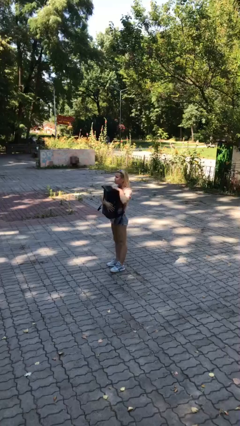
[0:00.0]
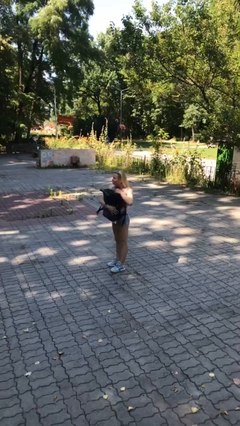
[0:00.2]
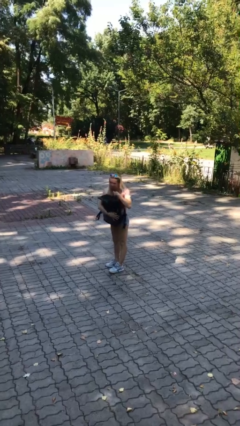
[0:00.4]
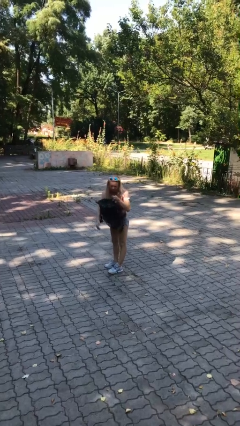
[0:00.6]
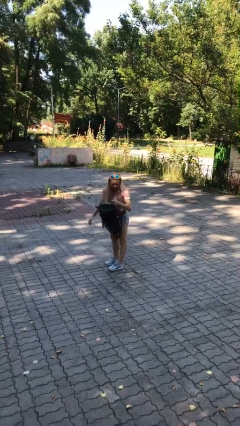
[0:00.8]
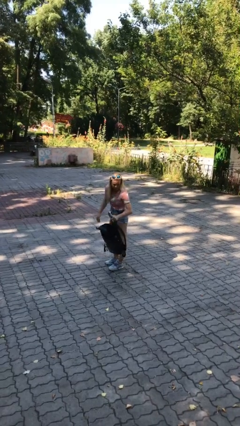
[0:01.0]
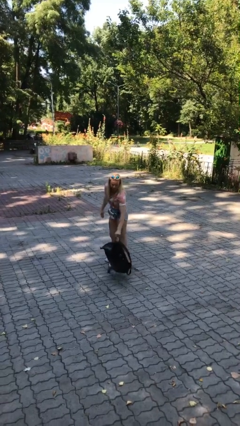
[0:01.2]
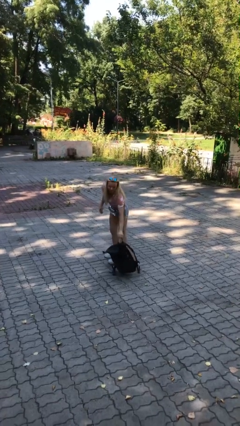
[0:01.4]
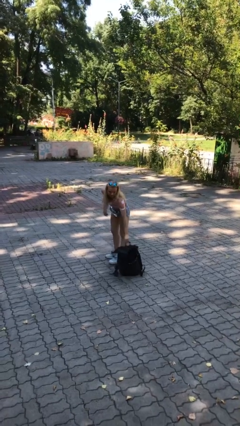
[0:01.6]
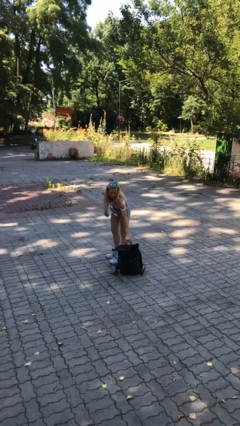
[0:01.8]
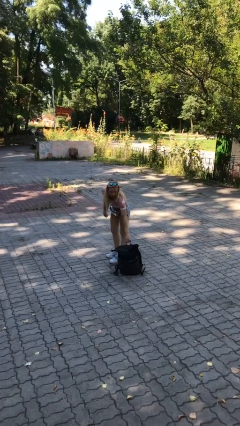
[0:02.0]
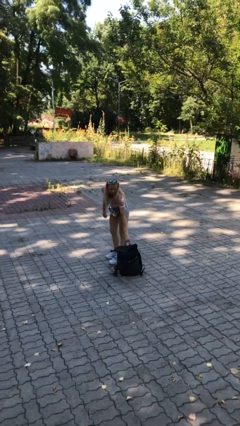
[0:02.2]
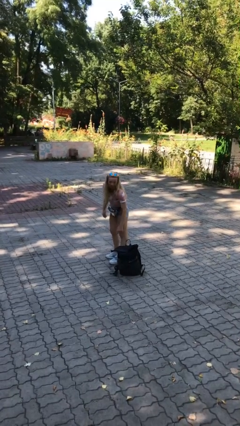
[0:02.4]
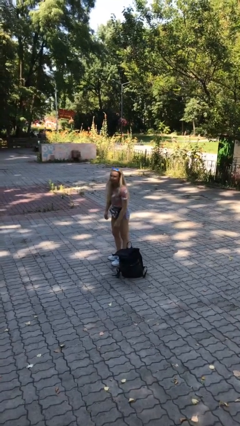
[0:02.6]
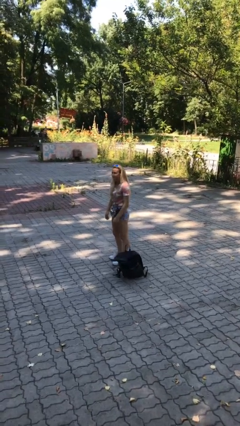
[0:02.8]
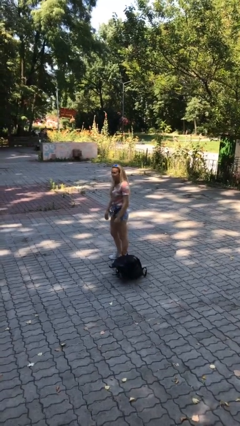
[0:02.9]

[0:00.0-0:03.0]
person puts down object on floor

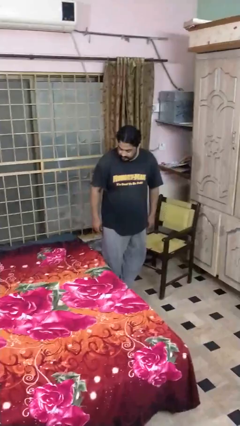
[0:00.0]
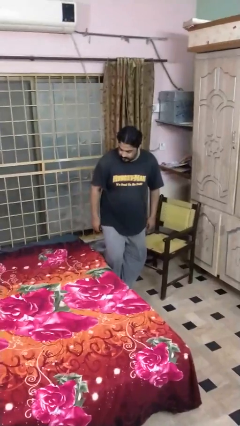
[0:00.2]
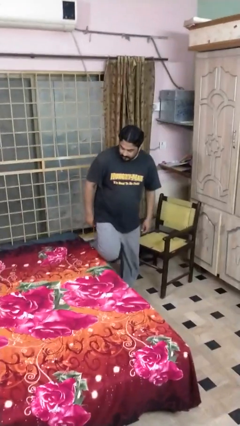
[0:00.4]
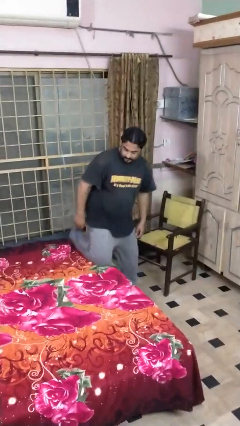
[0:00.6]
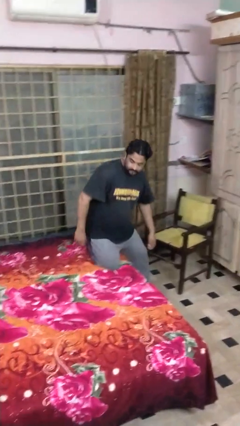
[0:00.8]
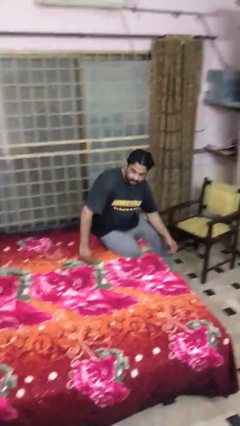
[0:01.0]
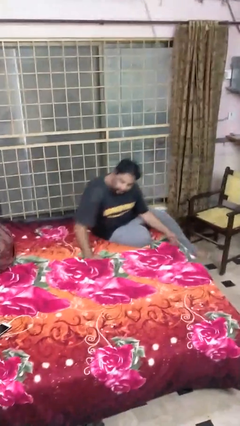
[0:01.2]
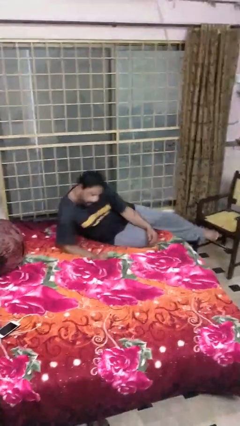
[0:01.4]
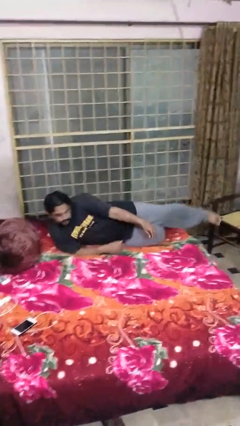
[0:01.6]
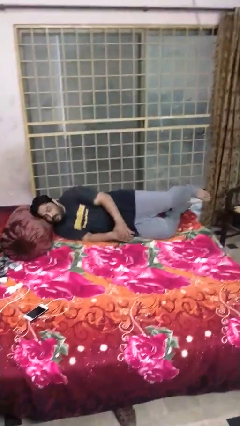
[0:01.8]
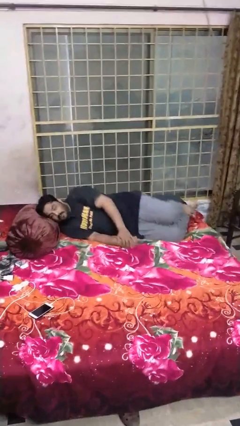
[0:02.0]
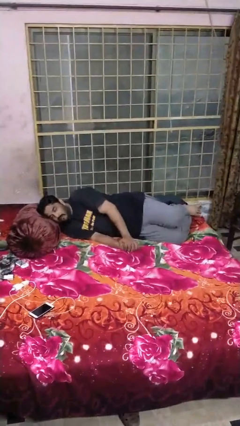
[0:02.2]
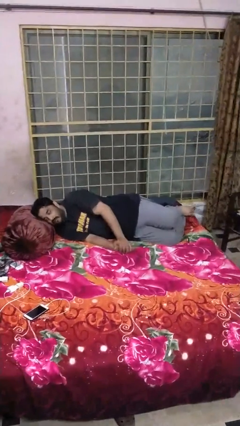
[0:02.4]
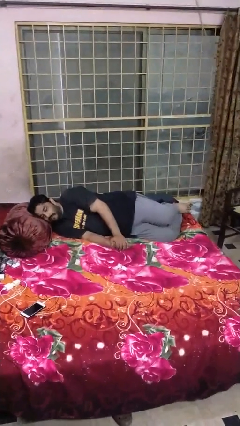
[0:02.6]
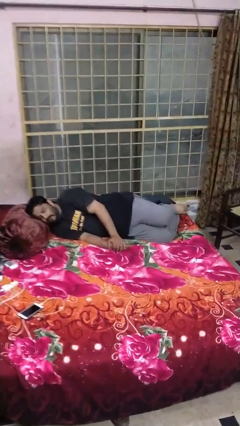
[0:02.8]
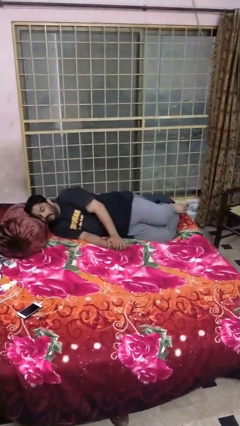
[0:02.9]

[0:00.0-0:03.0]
person lies down on bed

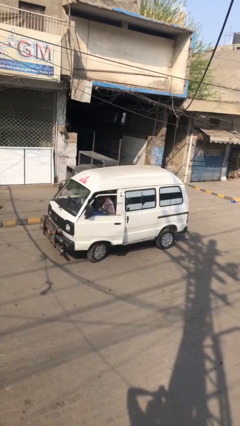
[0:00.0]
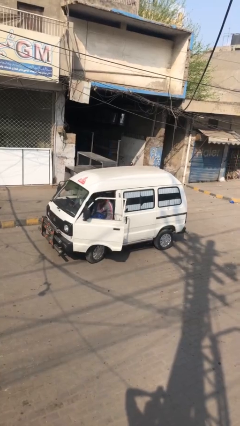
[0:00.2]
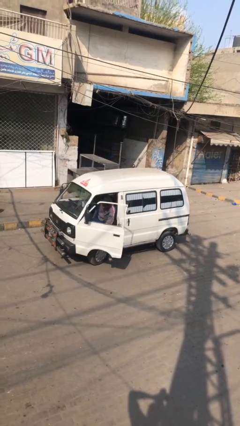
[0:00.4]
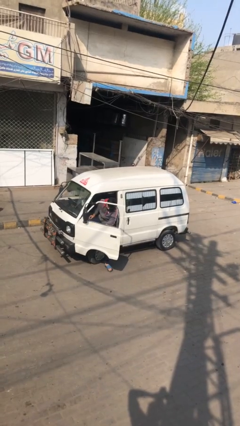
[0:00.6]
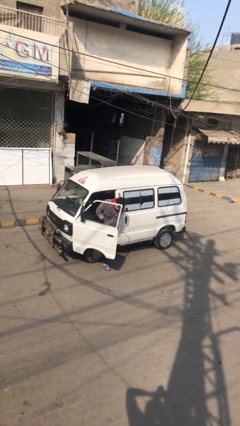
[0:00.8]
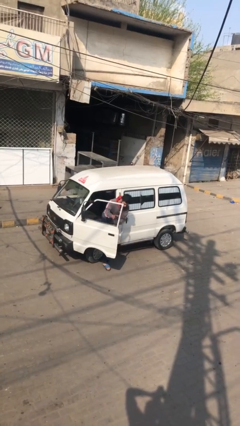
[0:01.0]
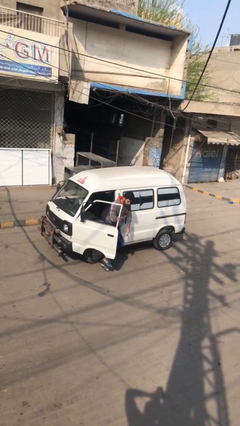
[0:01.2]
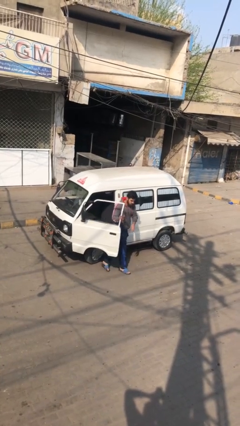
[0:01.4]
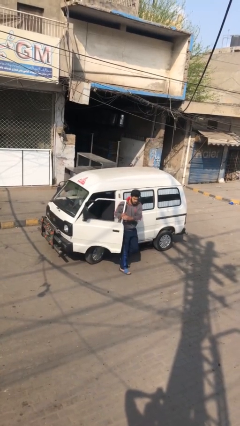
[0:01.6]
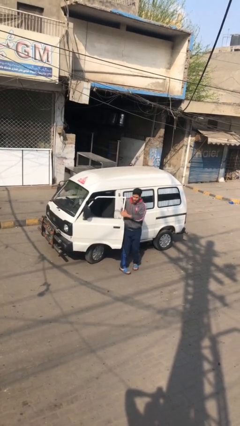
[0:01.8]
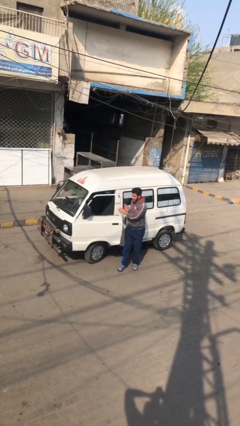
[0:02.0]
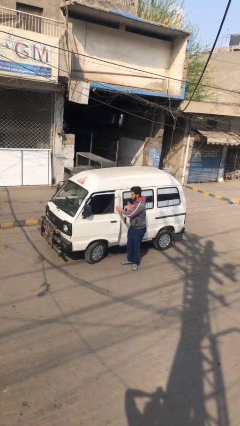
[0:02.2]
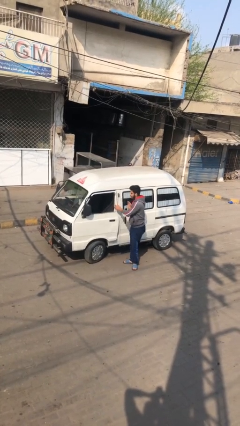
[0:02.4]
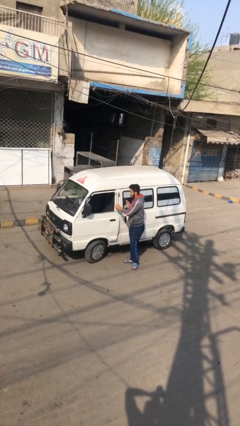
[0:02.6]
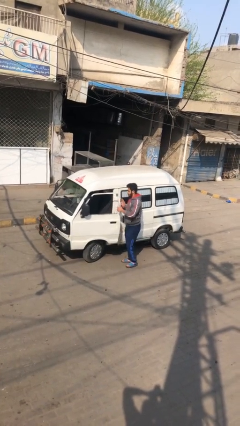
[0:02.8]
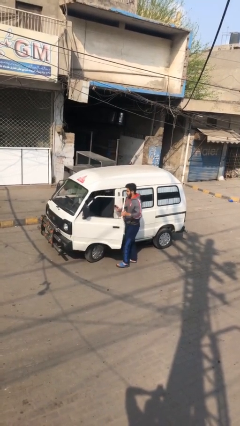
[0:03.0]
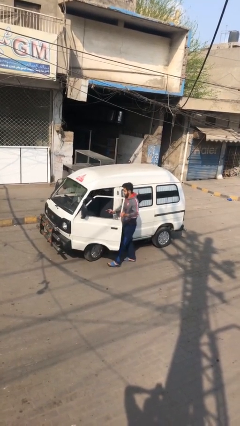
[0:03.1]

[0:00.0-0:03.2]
car drops off person

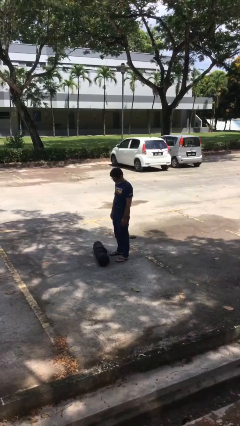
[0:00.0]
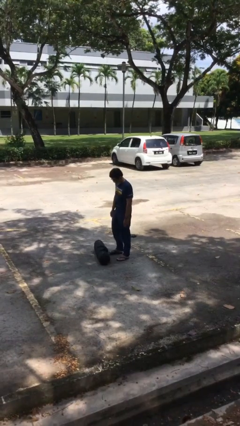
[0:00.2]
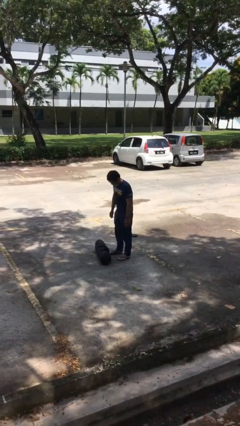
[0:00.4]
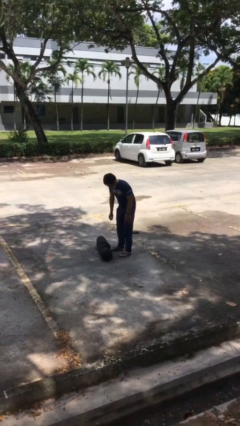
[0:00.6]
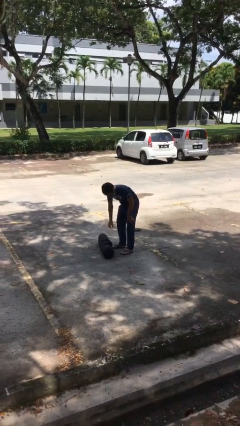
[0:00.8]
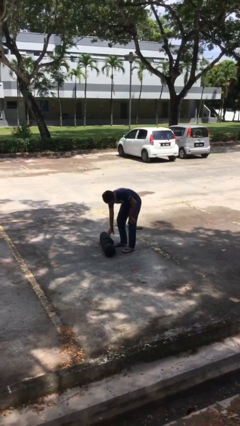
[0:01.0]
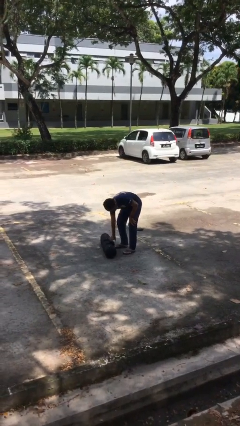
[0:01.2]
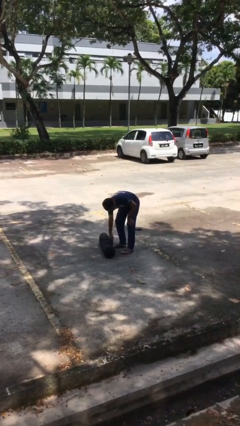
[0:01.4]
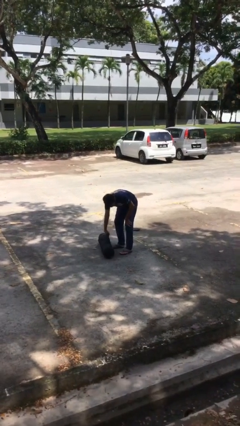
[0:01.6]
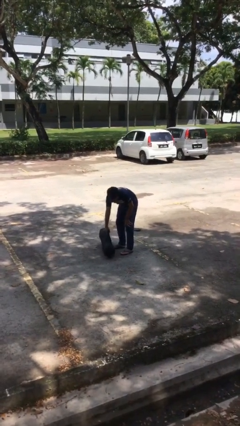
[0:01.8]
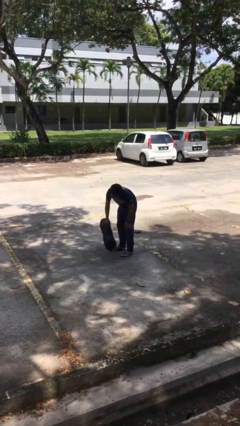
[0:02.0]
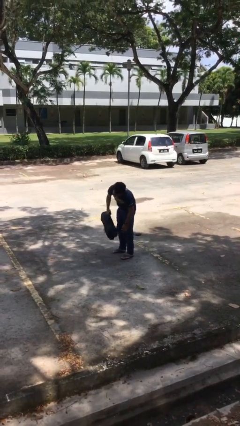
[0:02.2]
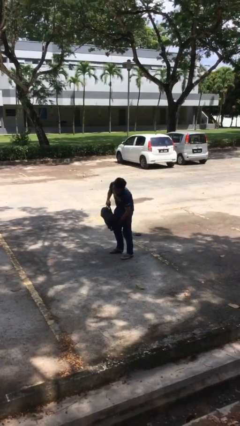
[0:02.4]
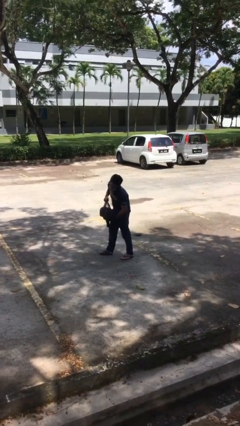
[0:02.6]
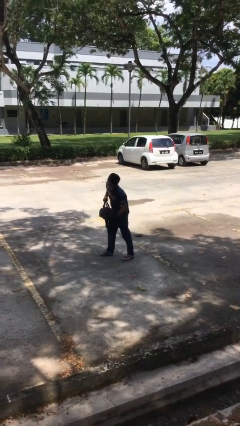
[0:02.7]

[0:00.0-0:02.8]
person picks up object from floor

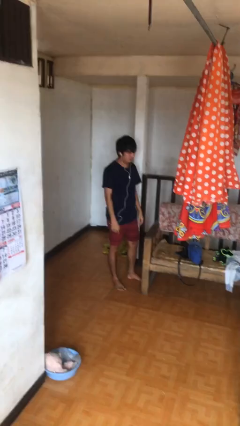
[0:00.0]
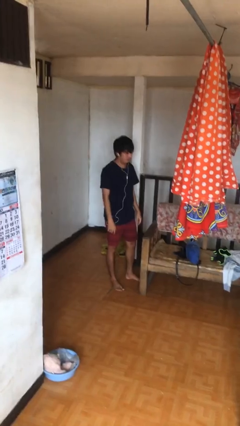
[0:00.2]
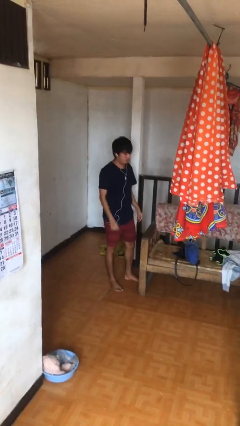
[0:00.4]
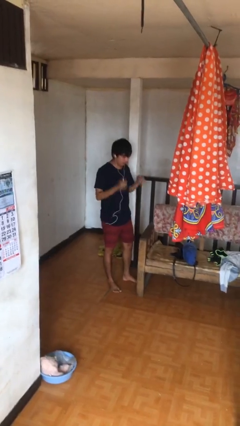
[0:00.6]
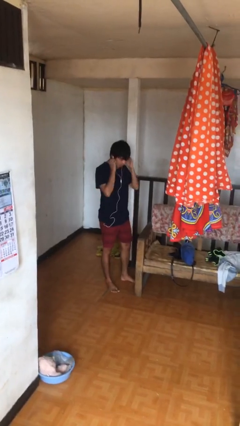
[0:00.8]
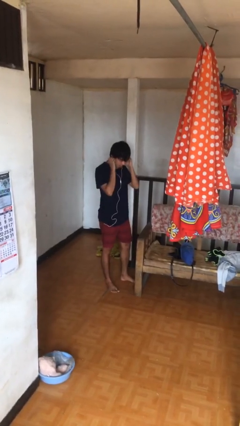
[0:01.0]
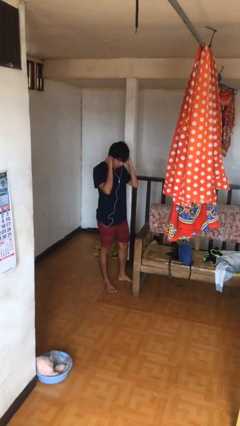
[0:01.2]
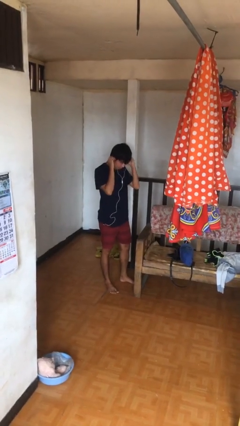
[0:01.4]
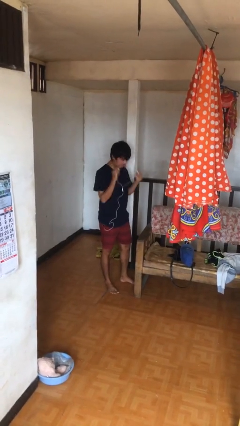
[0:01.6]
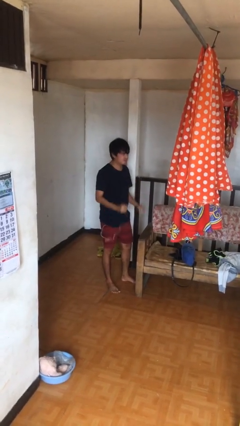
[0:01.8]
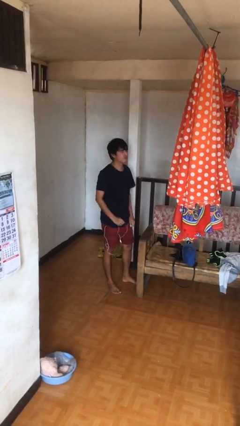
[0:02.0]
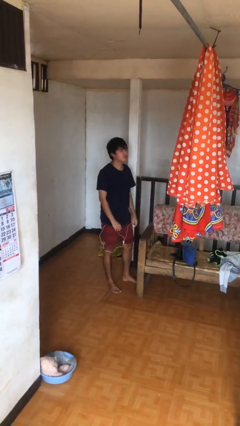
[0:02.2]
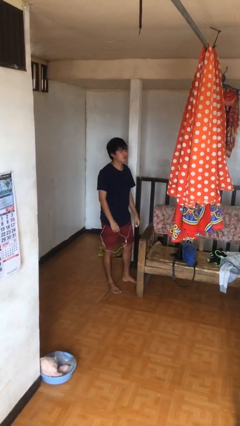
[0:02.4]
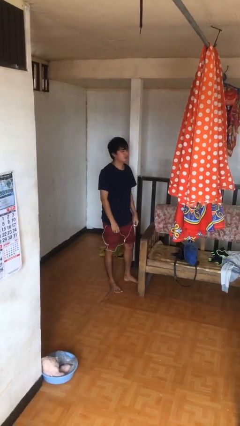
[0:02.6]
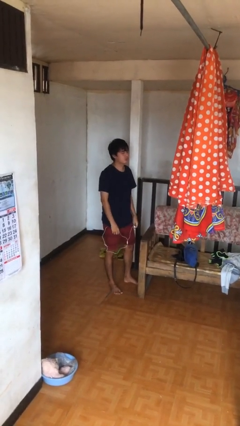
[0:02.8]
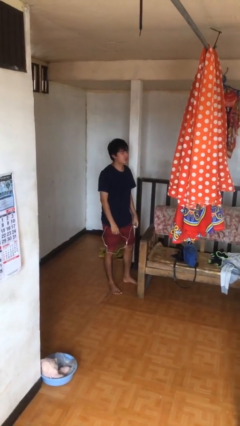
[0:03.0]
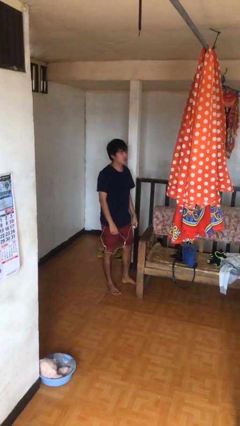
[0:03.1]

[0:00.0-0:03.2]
person takes off headphones

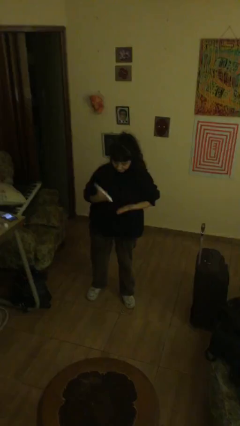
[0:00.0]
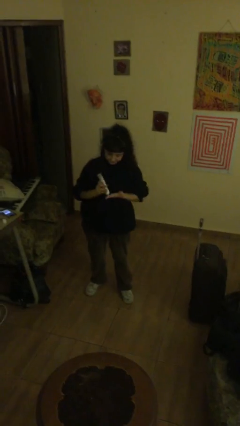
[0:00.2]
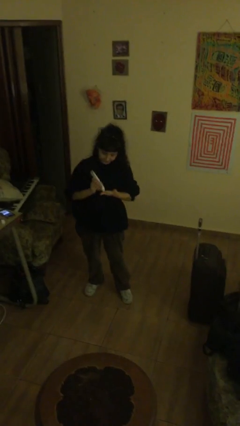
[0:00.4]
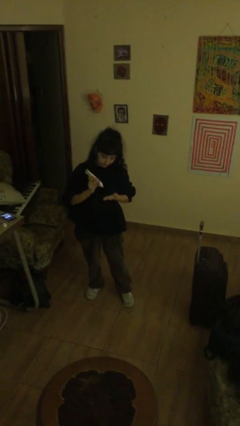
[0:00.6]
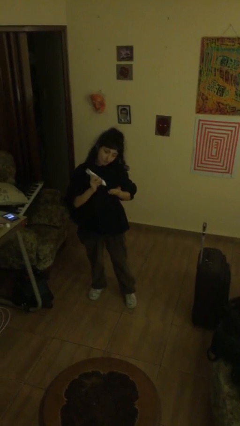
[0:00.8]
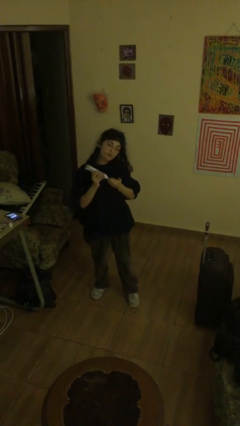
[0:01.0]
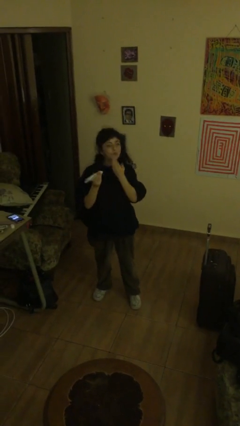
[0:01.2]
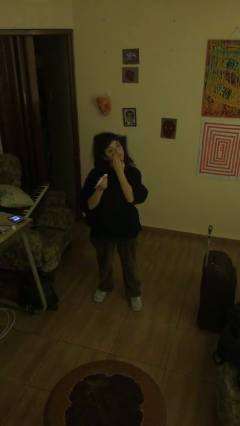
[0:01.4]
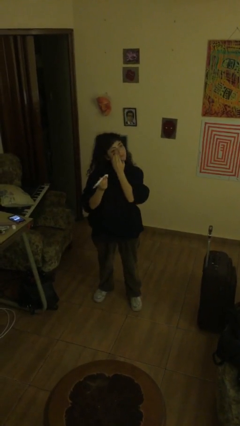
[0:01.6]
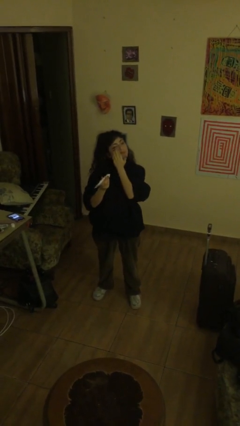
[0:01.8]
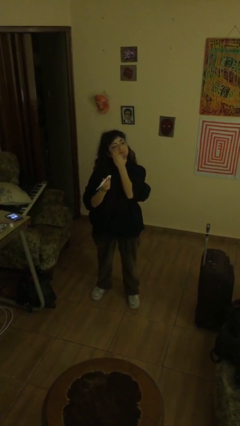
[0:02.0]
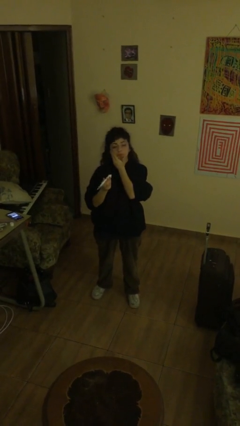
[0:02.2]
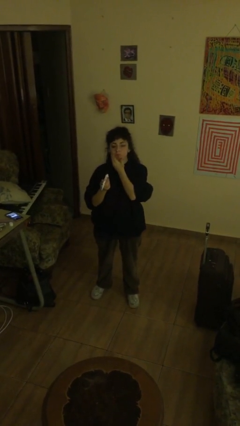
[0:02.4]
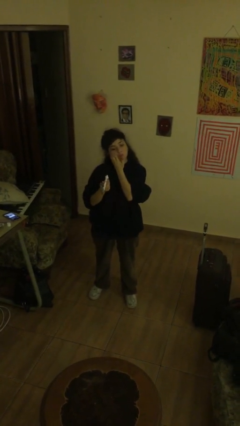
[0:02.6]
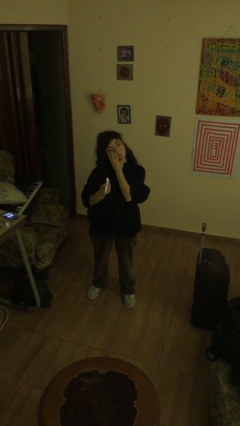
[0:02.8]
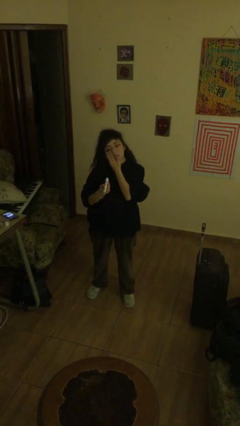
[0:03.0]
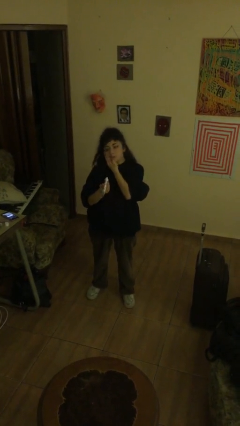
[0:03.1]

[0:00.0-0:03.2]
person applies sunscreen
